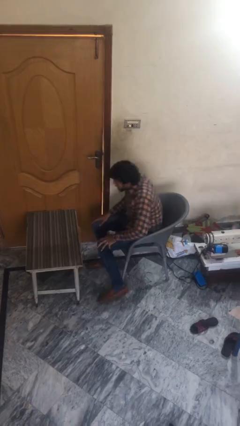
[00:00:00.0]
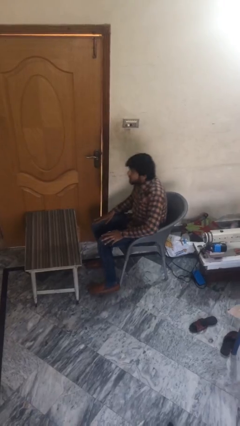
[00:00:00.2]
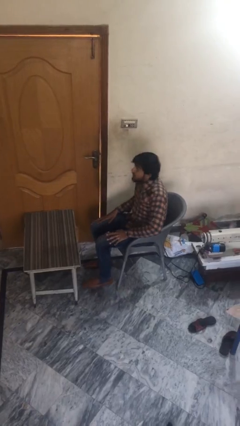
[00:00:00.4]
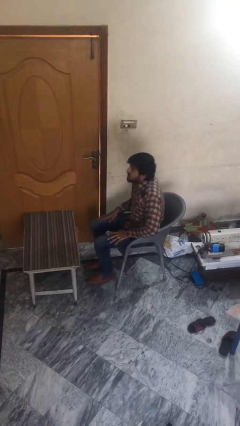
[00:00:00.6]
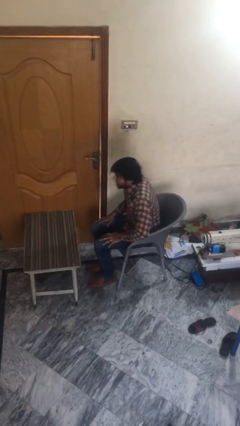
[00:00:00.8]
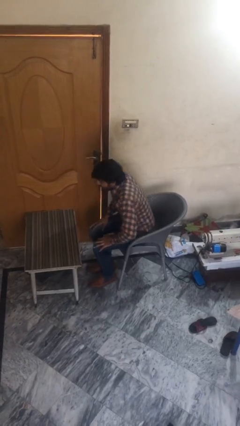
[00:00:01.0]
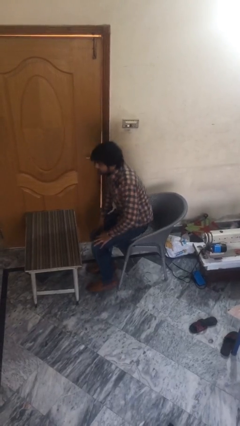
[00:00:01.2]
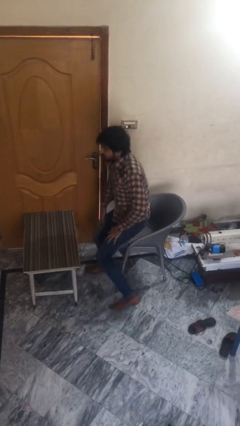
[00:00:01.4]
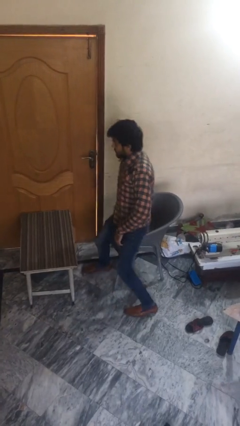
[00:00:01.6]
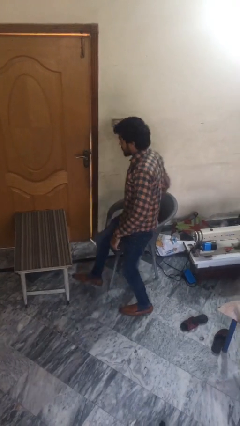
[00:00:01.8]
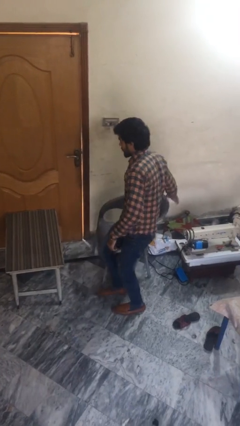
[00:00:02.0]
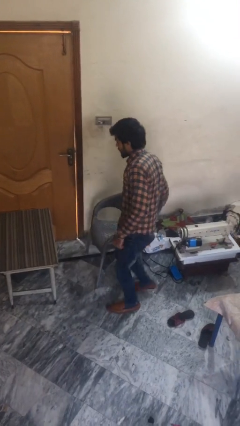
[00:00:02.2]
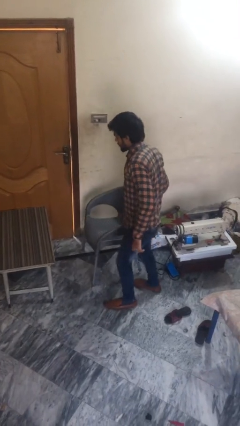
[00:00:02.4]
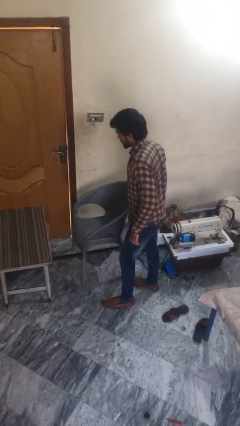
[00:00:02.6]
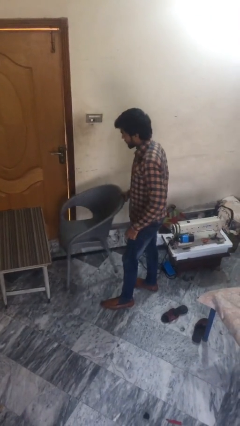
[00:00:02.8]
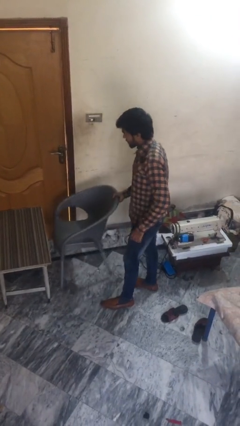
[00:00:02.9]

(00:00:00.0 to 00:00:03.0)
person stands up

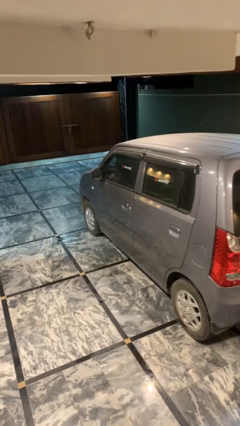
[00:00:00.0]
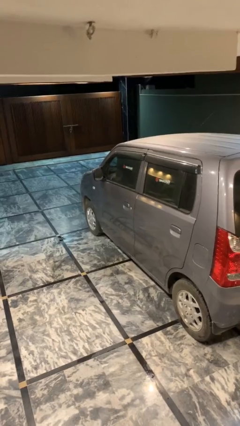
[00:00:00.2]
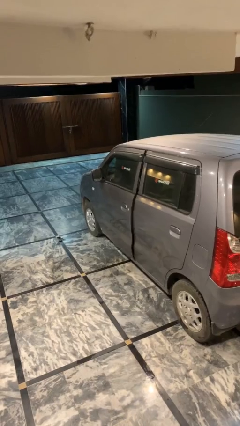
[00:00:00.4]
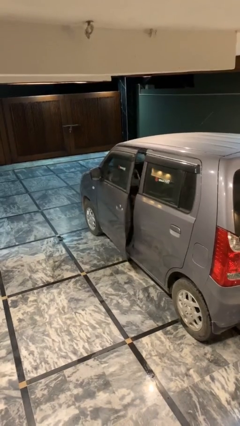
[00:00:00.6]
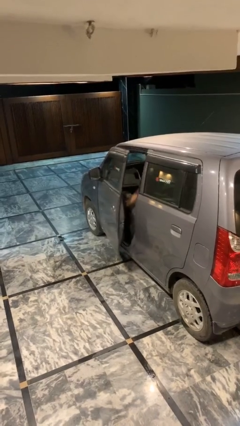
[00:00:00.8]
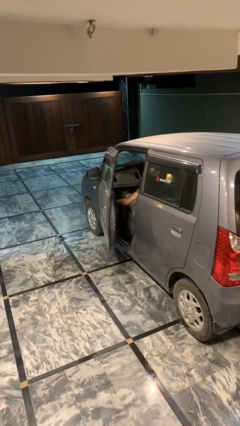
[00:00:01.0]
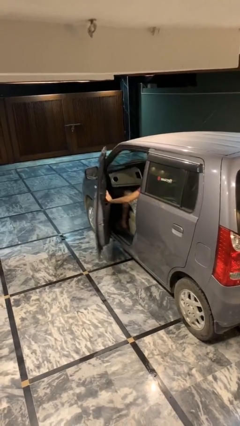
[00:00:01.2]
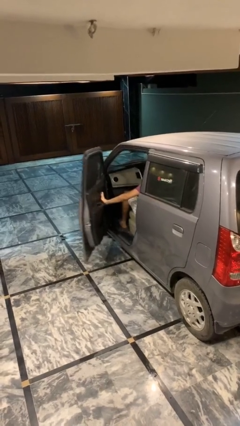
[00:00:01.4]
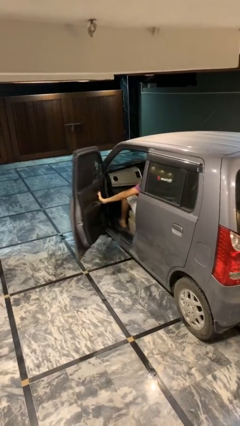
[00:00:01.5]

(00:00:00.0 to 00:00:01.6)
person opens car door

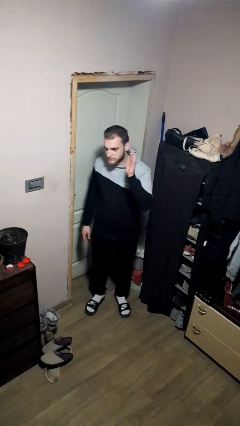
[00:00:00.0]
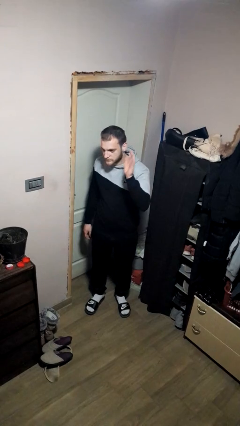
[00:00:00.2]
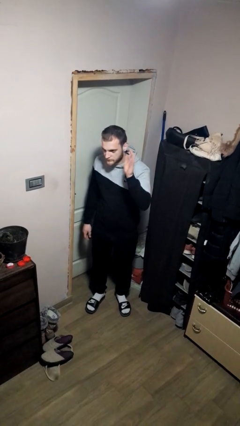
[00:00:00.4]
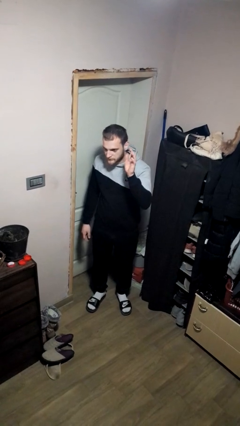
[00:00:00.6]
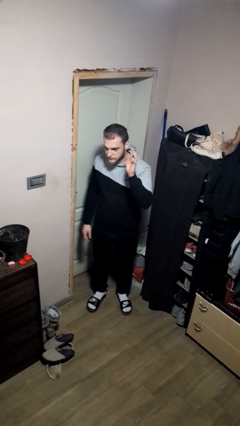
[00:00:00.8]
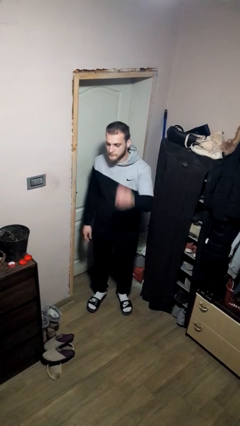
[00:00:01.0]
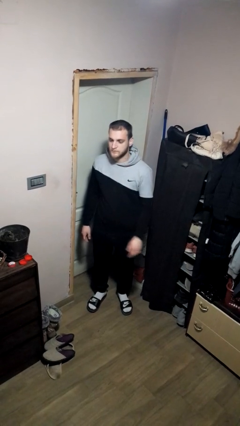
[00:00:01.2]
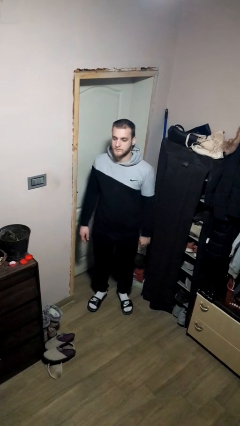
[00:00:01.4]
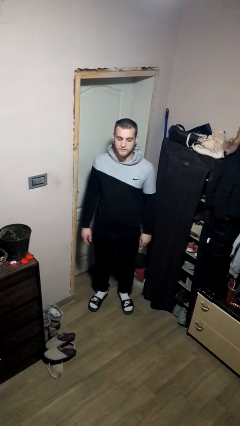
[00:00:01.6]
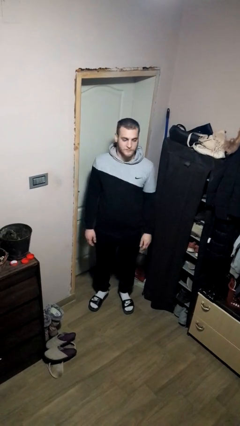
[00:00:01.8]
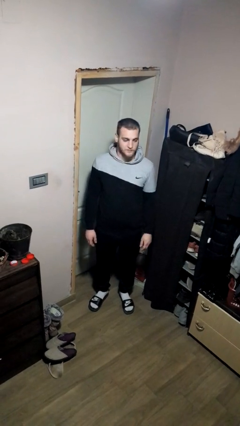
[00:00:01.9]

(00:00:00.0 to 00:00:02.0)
person waves at person

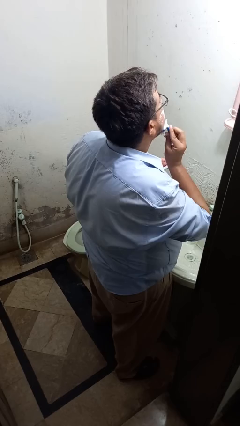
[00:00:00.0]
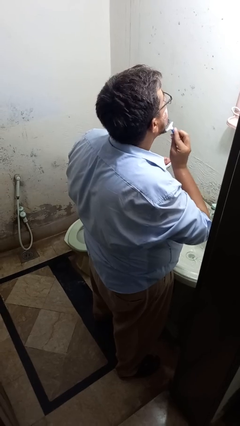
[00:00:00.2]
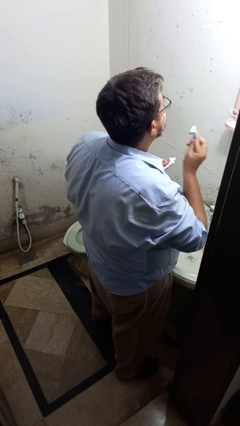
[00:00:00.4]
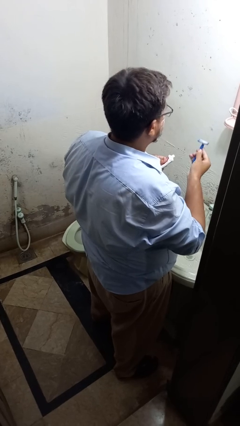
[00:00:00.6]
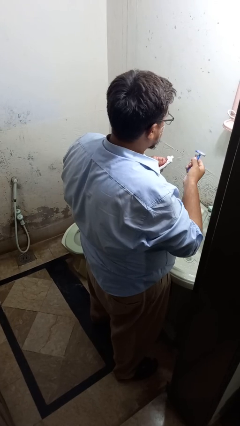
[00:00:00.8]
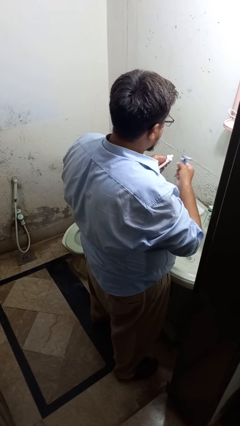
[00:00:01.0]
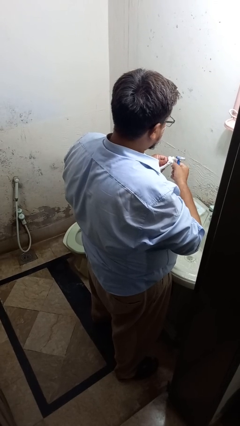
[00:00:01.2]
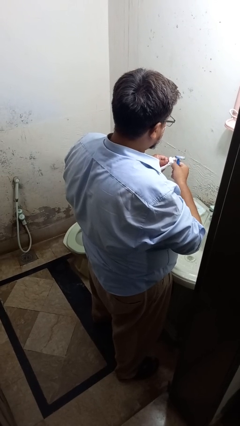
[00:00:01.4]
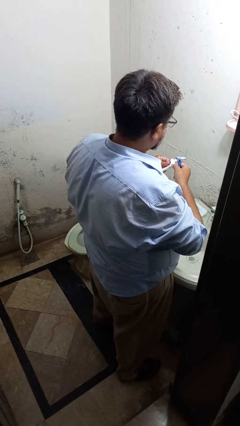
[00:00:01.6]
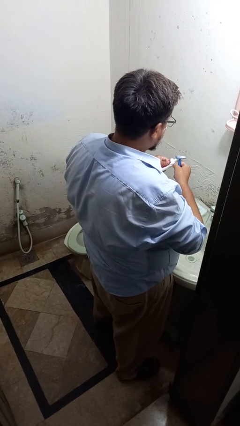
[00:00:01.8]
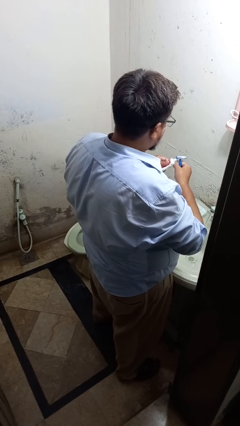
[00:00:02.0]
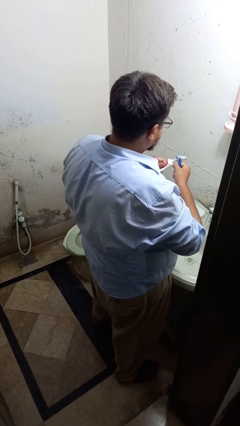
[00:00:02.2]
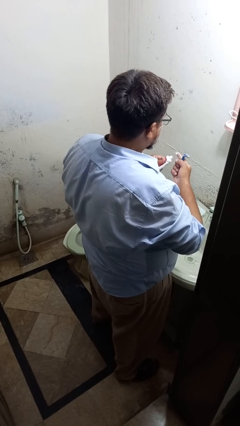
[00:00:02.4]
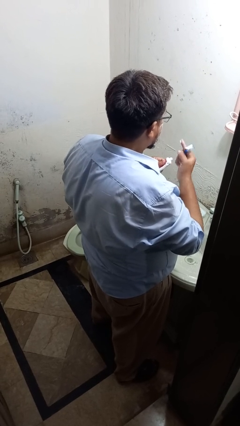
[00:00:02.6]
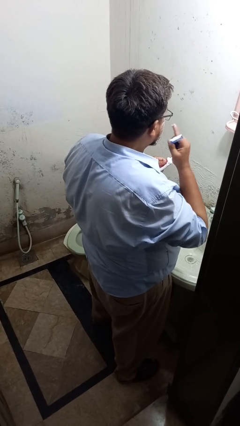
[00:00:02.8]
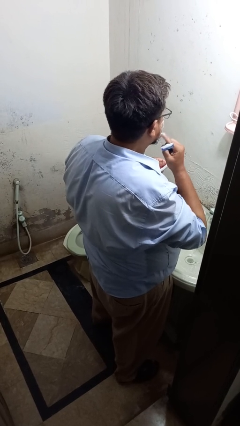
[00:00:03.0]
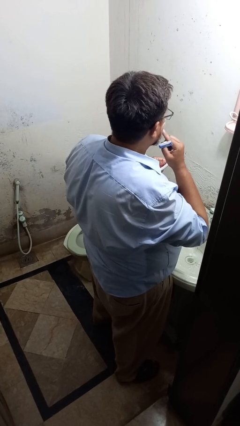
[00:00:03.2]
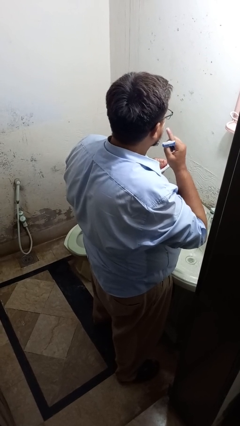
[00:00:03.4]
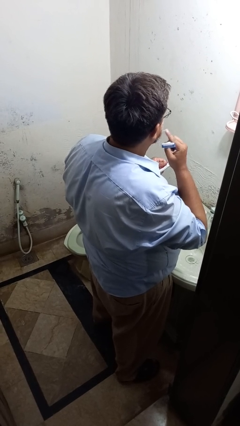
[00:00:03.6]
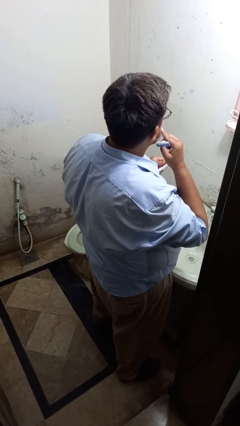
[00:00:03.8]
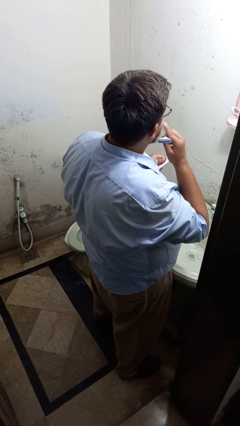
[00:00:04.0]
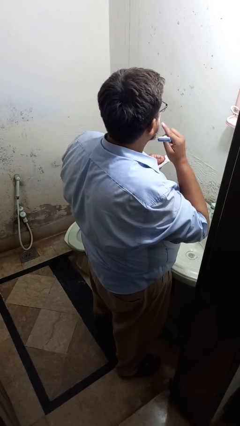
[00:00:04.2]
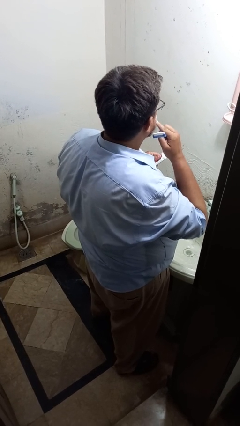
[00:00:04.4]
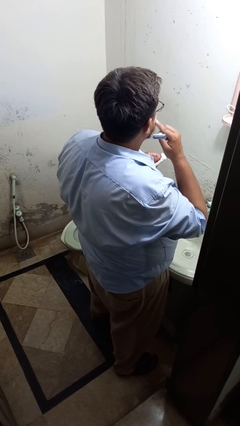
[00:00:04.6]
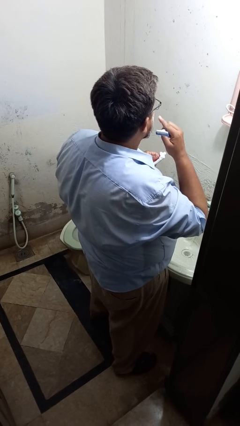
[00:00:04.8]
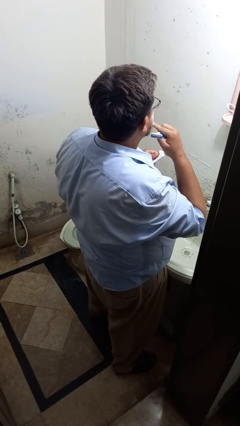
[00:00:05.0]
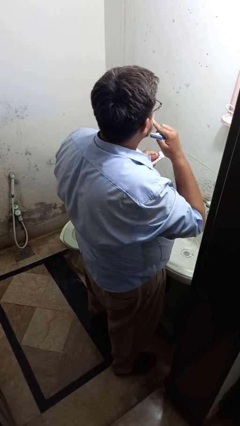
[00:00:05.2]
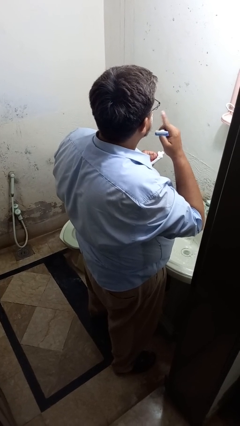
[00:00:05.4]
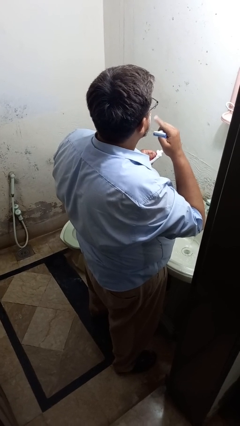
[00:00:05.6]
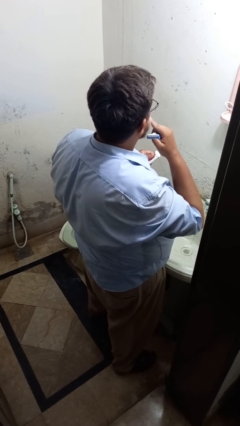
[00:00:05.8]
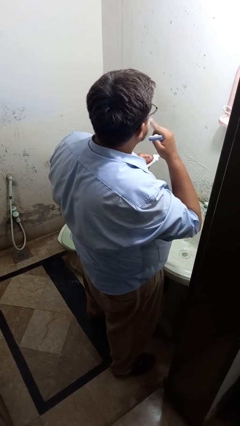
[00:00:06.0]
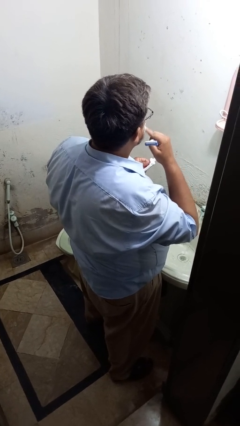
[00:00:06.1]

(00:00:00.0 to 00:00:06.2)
person applies shaving cream

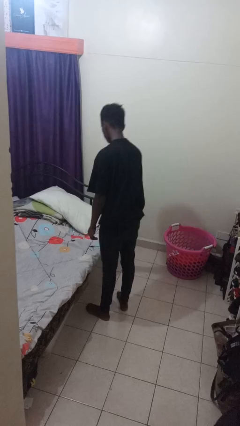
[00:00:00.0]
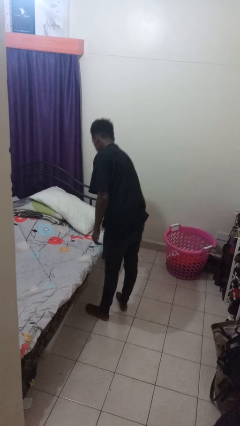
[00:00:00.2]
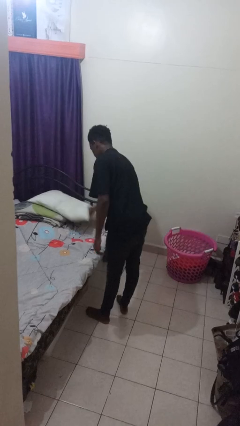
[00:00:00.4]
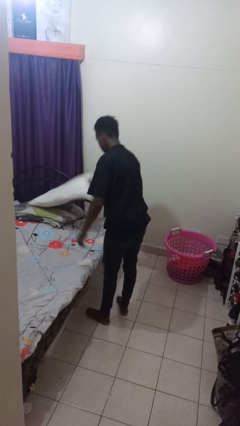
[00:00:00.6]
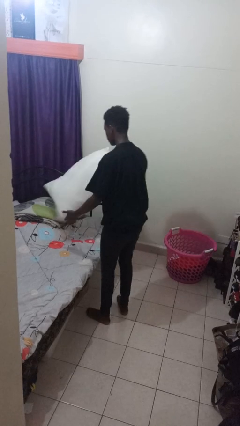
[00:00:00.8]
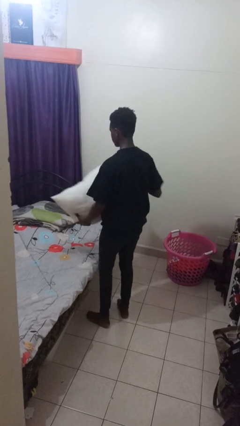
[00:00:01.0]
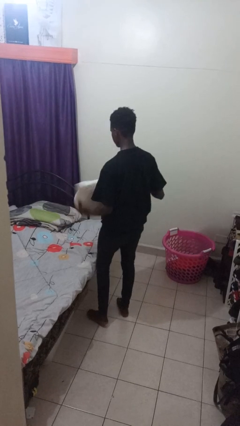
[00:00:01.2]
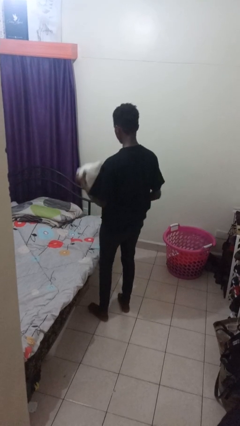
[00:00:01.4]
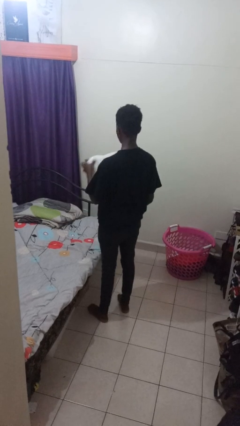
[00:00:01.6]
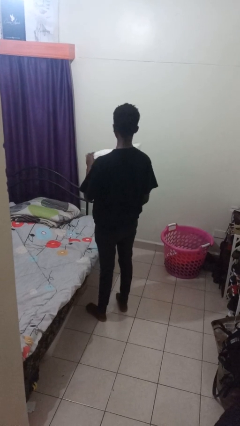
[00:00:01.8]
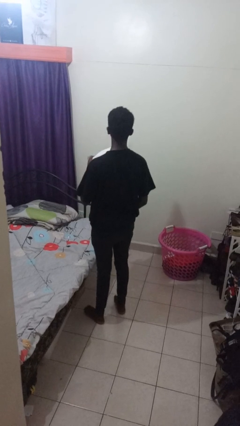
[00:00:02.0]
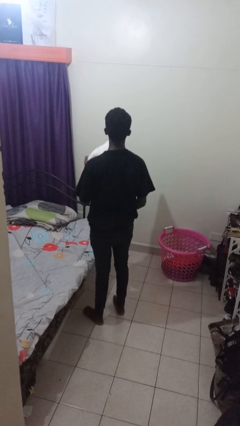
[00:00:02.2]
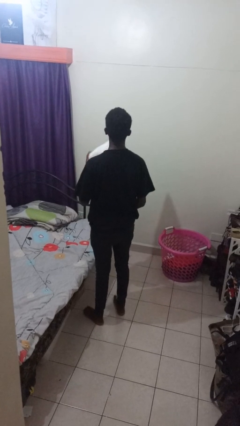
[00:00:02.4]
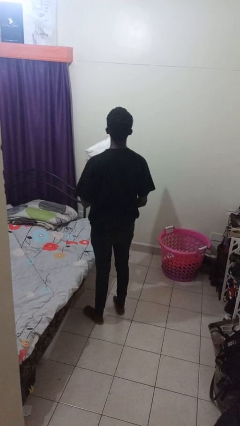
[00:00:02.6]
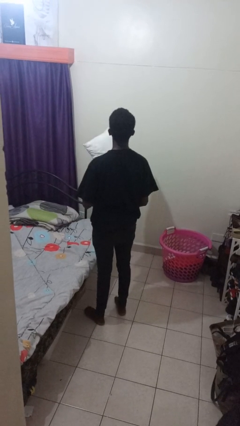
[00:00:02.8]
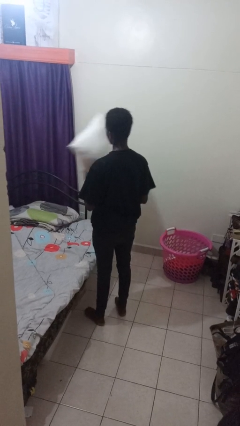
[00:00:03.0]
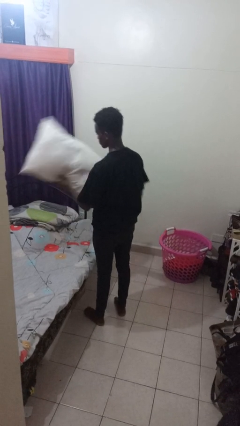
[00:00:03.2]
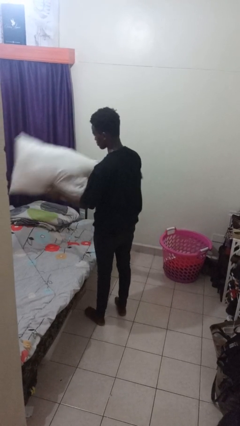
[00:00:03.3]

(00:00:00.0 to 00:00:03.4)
person picks up object from bed

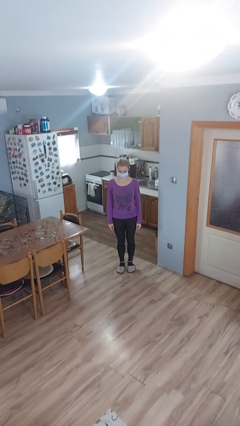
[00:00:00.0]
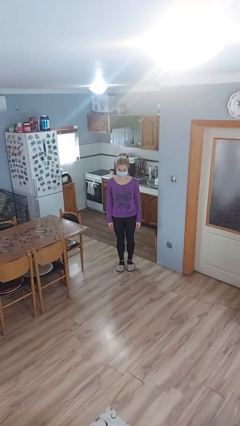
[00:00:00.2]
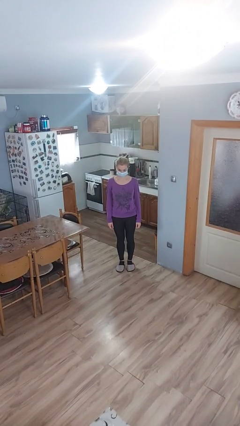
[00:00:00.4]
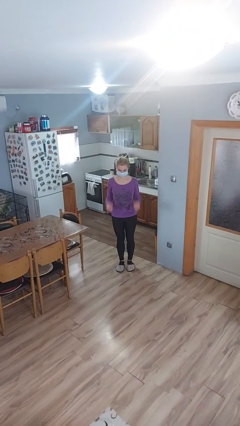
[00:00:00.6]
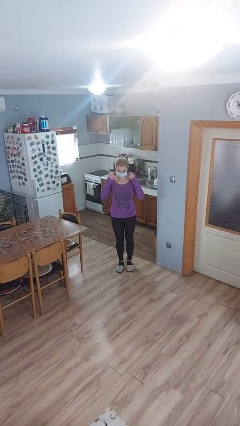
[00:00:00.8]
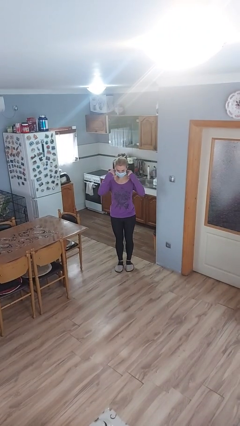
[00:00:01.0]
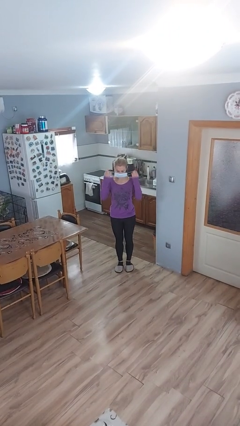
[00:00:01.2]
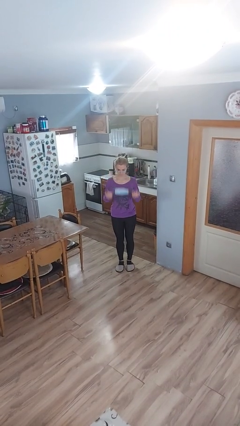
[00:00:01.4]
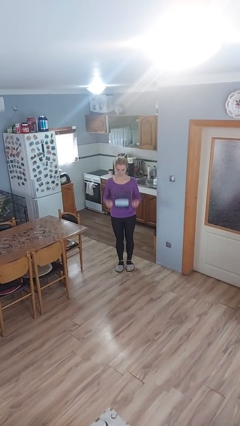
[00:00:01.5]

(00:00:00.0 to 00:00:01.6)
person takes off facemask
